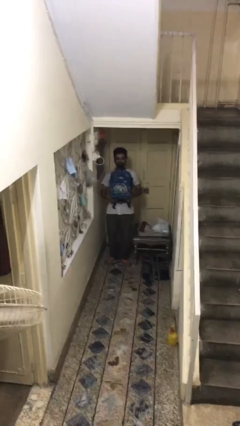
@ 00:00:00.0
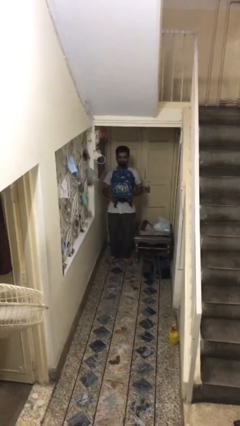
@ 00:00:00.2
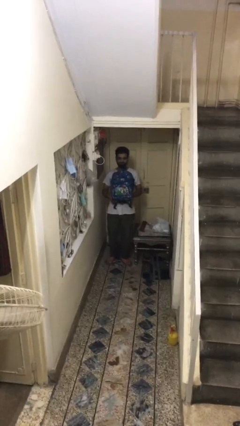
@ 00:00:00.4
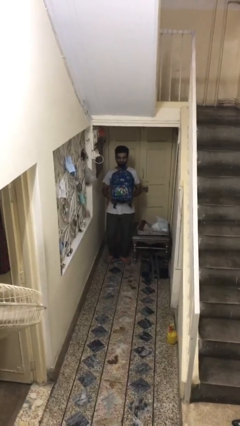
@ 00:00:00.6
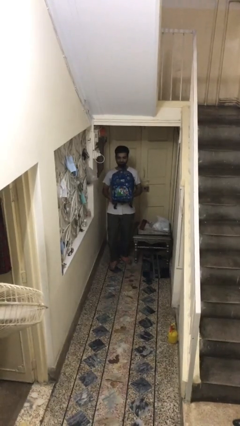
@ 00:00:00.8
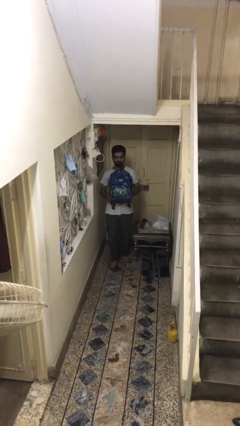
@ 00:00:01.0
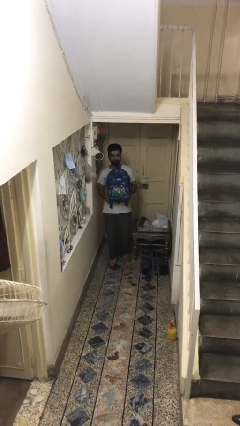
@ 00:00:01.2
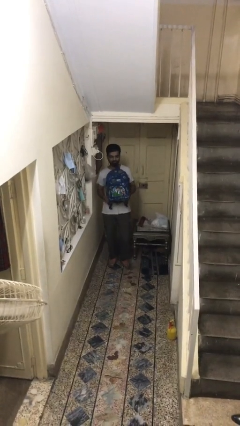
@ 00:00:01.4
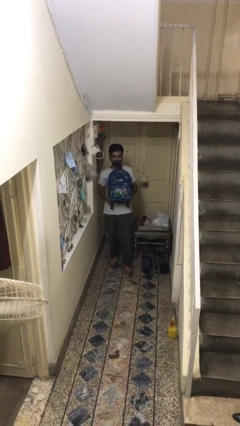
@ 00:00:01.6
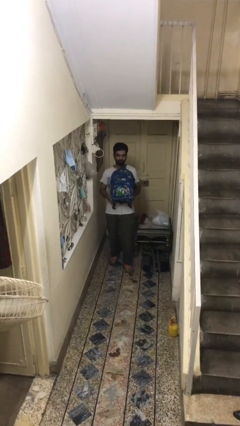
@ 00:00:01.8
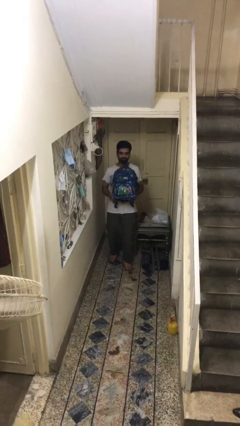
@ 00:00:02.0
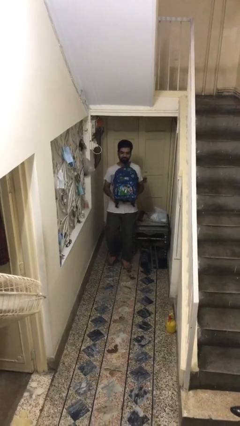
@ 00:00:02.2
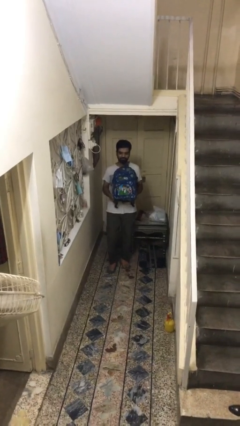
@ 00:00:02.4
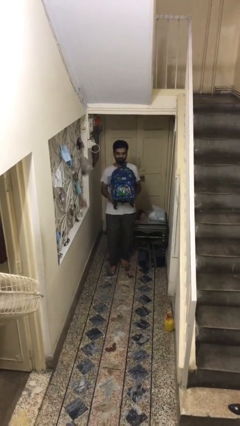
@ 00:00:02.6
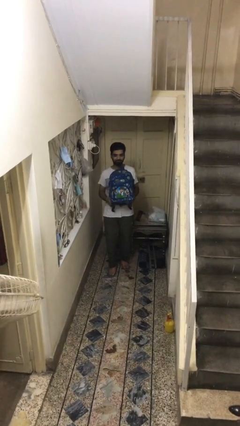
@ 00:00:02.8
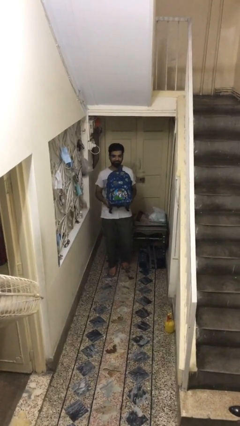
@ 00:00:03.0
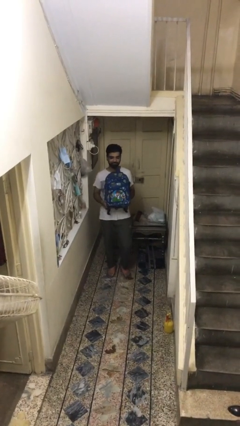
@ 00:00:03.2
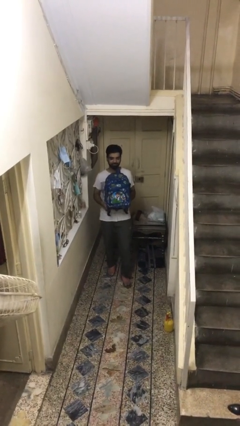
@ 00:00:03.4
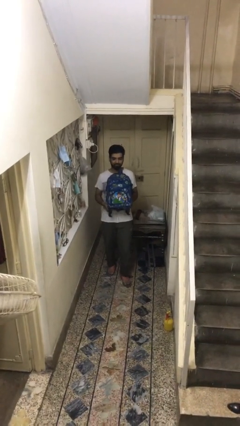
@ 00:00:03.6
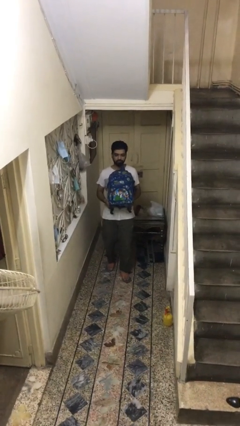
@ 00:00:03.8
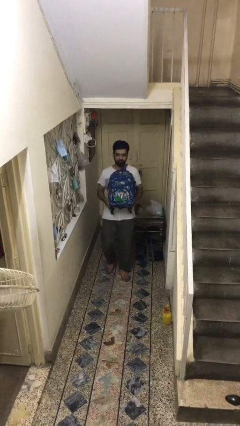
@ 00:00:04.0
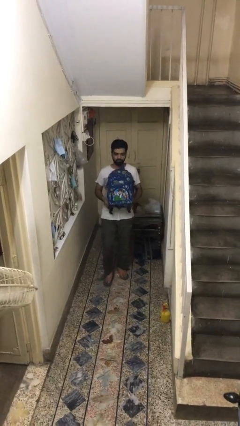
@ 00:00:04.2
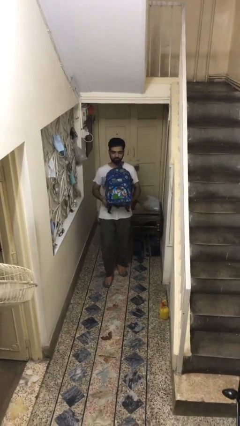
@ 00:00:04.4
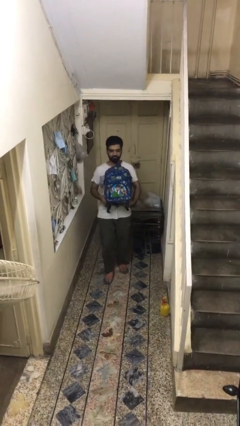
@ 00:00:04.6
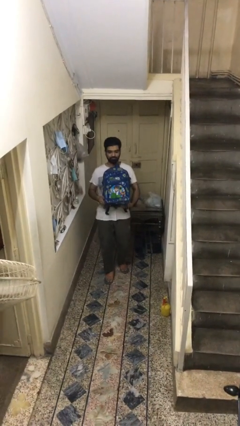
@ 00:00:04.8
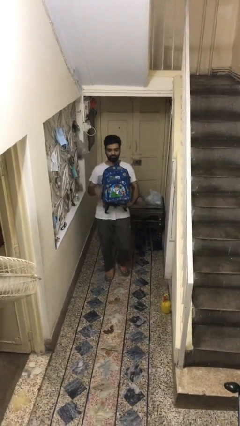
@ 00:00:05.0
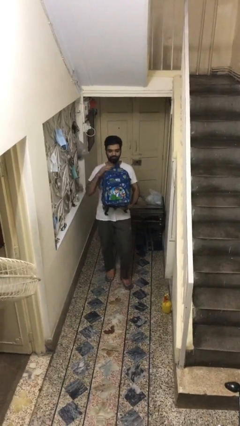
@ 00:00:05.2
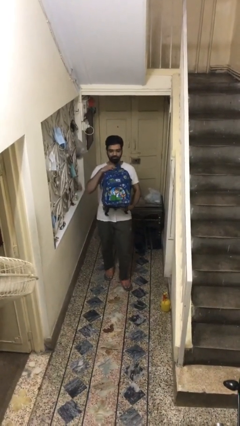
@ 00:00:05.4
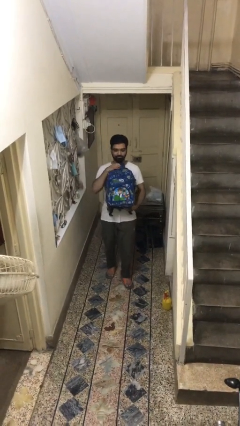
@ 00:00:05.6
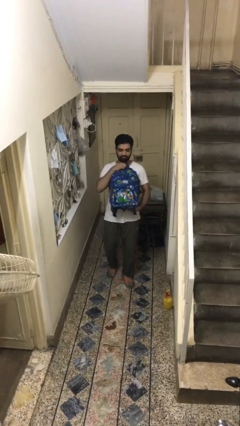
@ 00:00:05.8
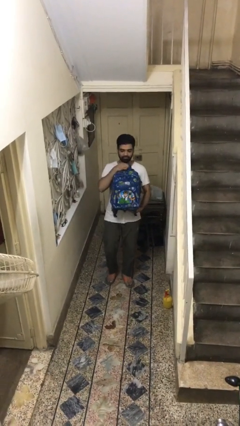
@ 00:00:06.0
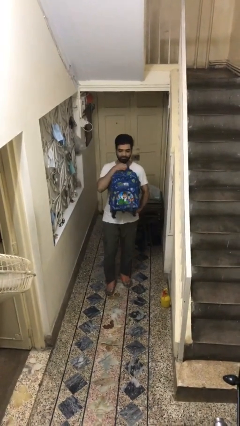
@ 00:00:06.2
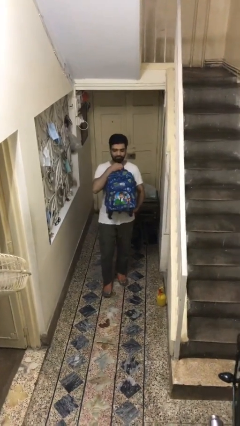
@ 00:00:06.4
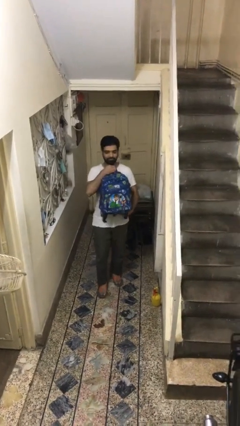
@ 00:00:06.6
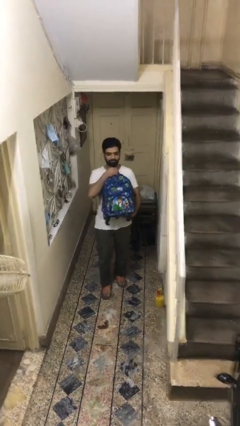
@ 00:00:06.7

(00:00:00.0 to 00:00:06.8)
person carries heavy object

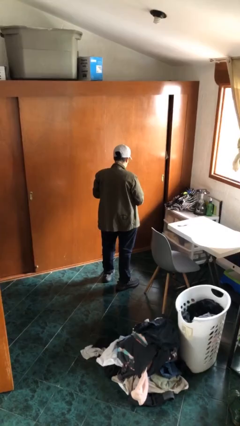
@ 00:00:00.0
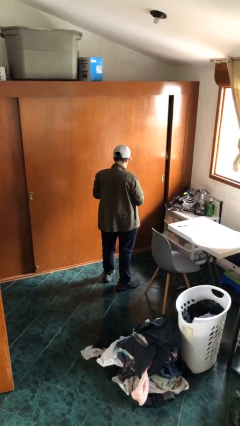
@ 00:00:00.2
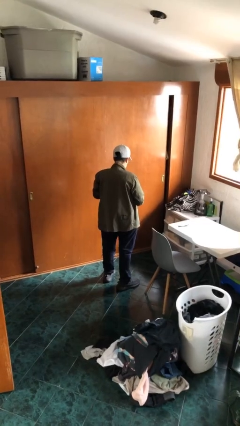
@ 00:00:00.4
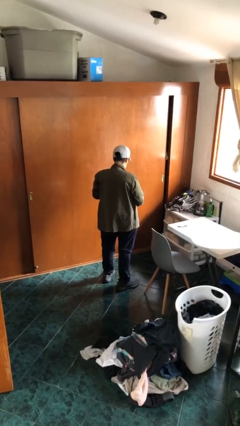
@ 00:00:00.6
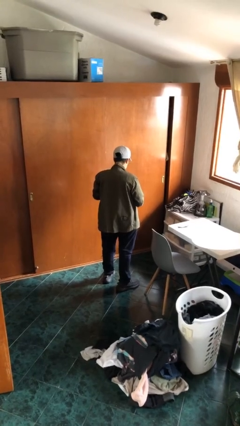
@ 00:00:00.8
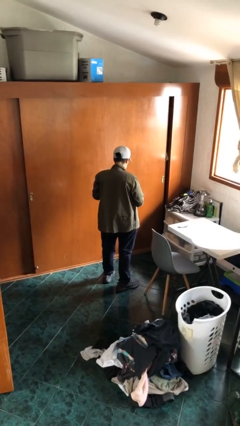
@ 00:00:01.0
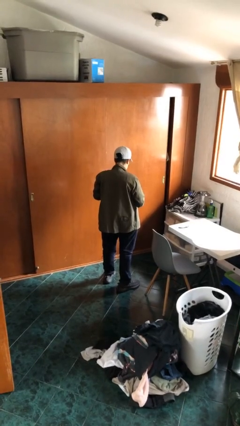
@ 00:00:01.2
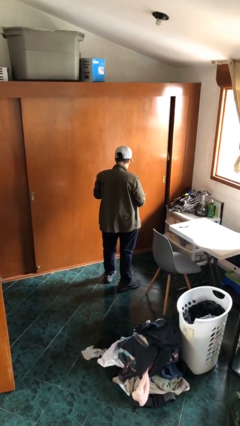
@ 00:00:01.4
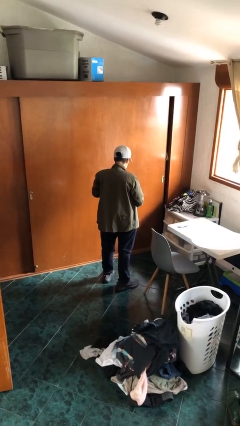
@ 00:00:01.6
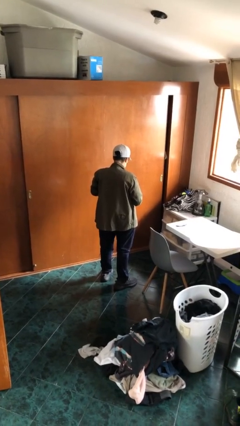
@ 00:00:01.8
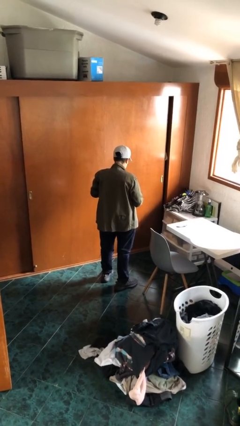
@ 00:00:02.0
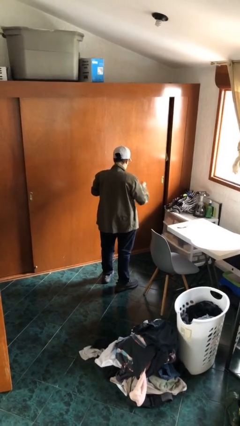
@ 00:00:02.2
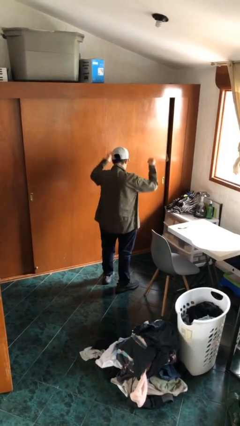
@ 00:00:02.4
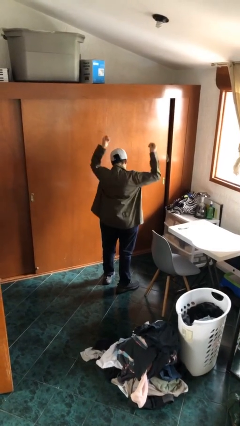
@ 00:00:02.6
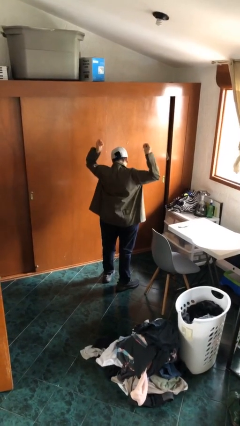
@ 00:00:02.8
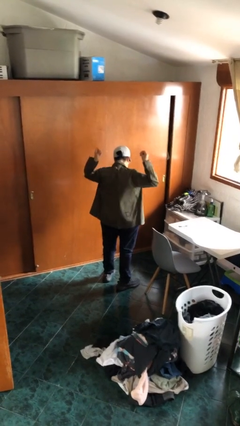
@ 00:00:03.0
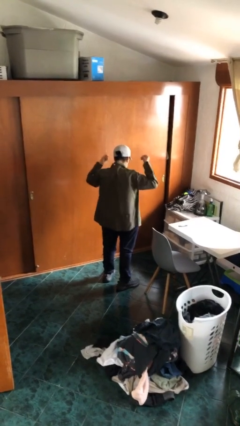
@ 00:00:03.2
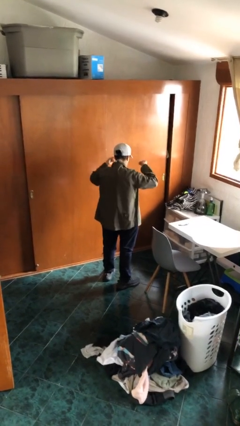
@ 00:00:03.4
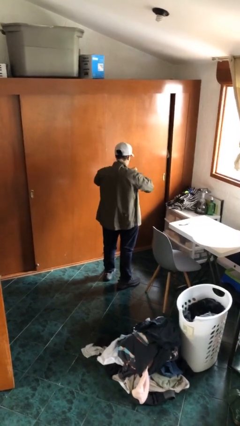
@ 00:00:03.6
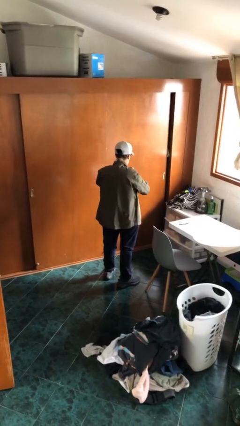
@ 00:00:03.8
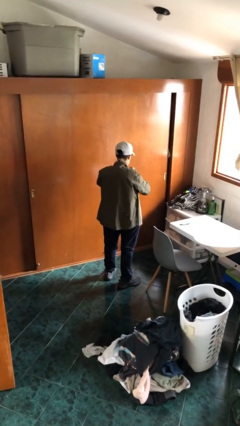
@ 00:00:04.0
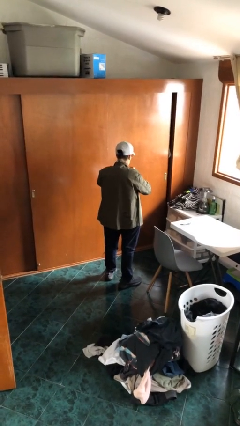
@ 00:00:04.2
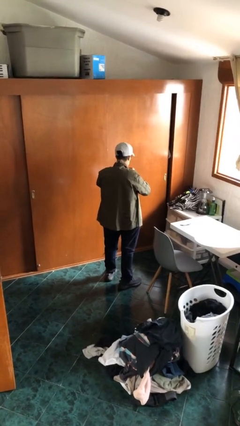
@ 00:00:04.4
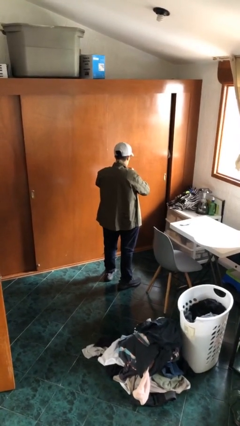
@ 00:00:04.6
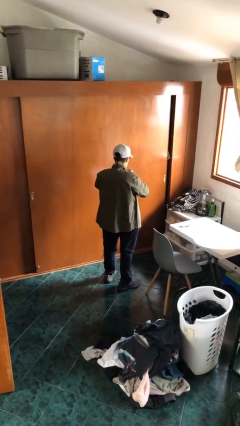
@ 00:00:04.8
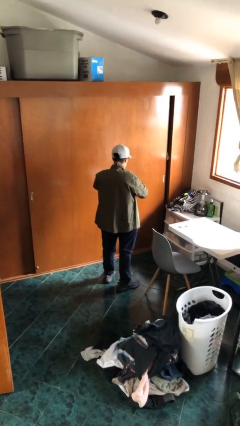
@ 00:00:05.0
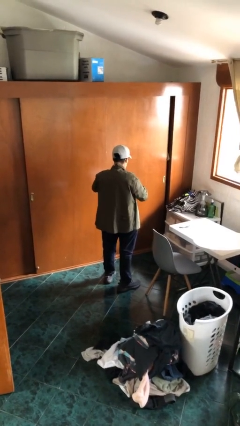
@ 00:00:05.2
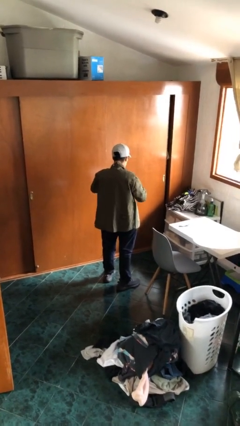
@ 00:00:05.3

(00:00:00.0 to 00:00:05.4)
person puts on necklace

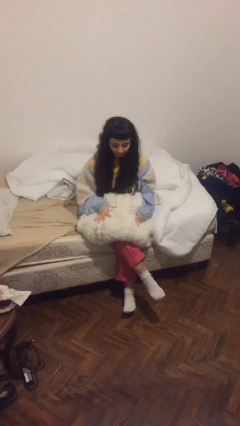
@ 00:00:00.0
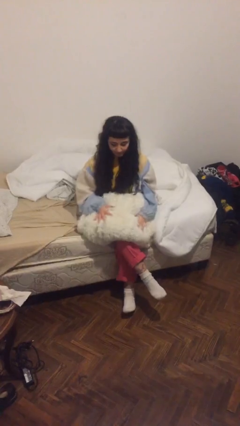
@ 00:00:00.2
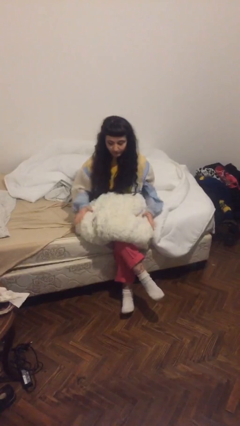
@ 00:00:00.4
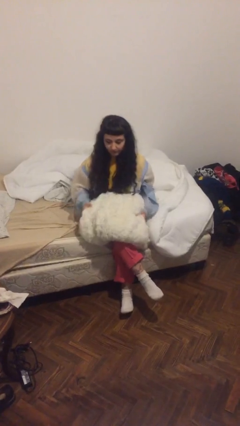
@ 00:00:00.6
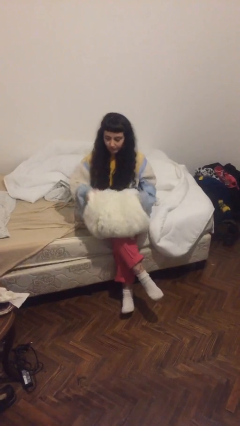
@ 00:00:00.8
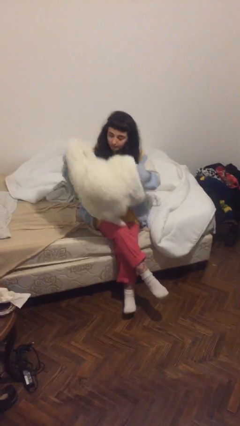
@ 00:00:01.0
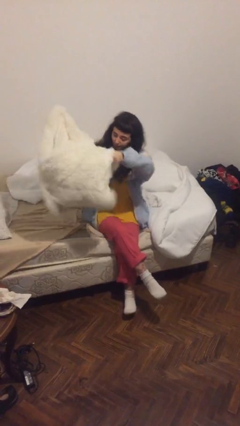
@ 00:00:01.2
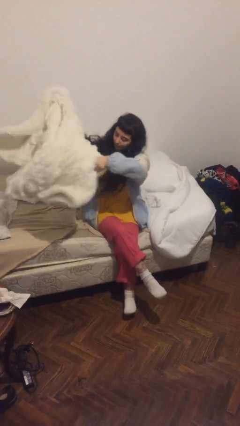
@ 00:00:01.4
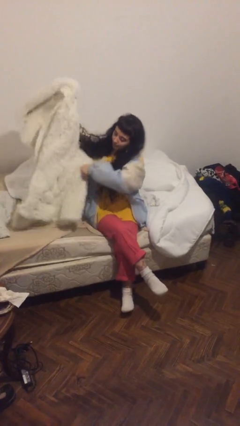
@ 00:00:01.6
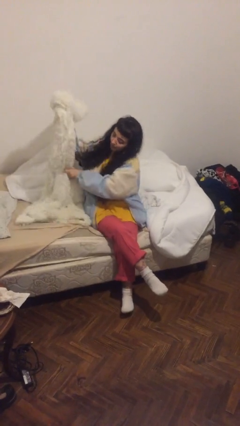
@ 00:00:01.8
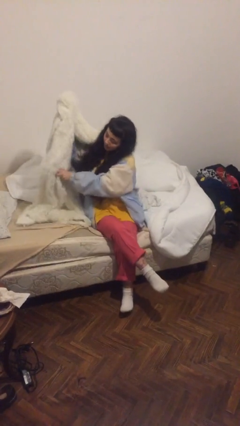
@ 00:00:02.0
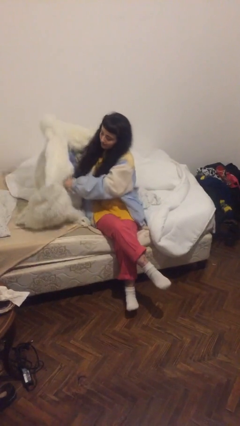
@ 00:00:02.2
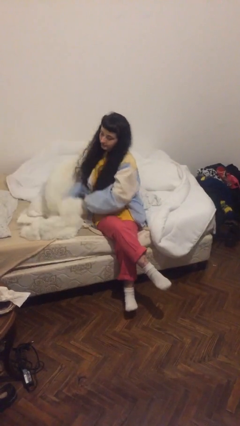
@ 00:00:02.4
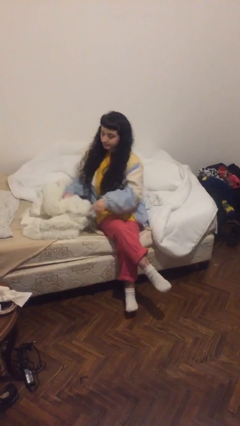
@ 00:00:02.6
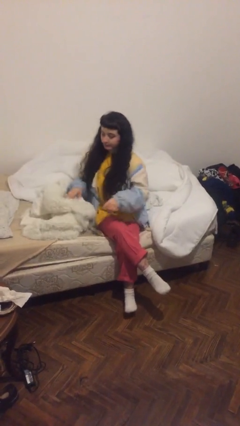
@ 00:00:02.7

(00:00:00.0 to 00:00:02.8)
person unfolds blanket

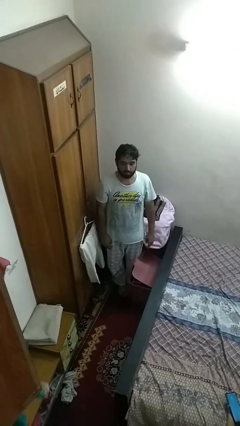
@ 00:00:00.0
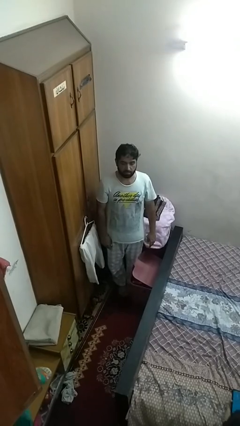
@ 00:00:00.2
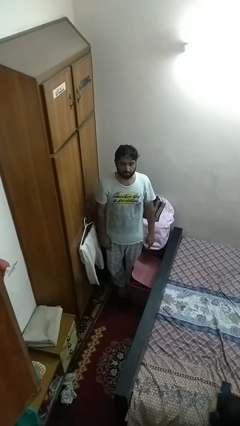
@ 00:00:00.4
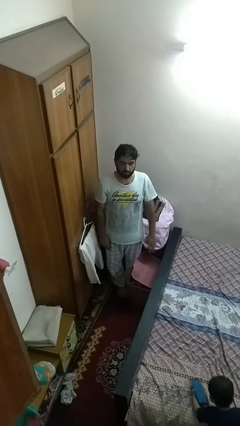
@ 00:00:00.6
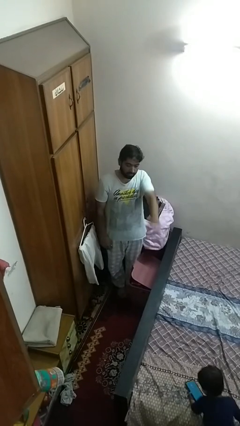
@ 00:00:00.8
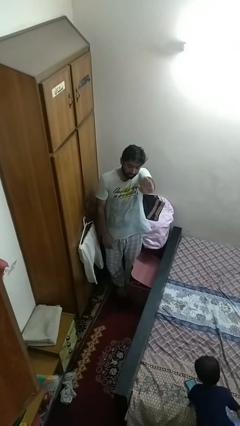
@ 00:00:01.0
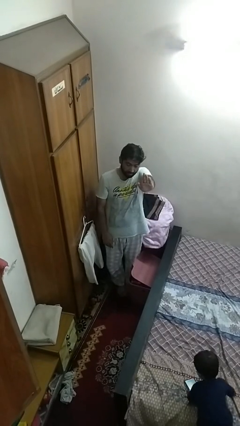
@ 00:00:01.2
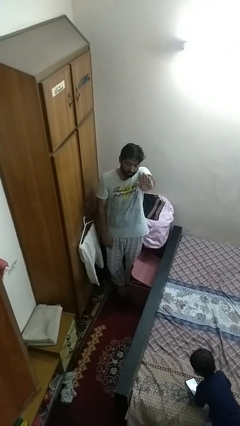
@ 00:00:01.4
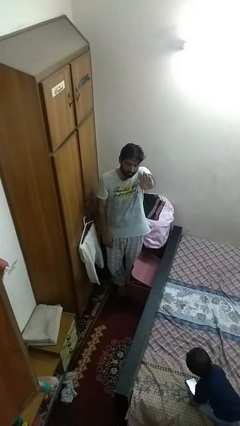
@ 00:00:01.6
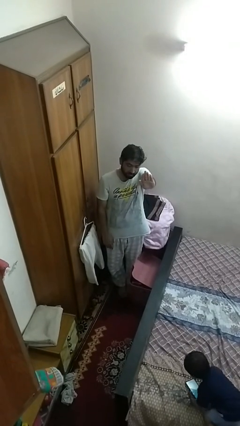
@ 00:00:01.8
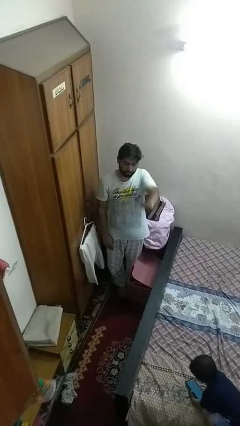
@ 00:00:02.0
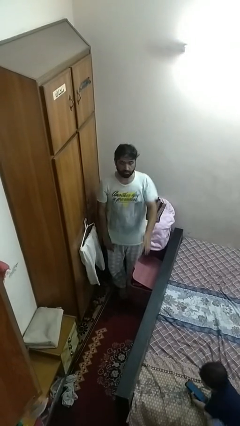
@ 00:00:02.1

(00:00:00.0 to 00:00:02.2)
person gestures stop

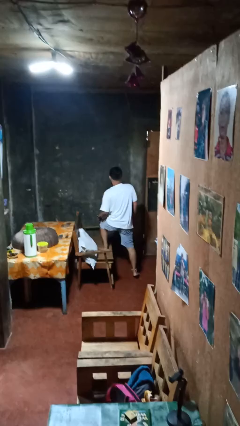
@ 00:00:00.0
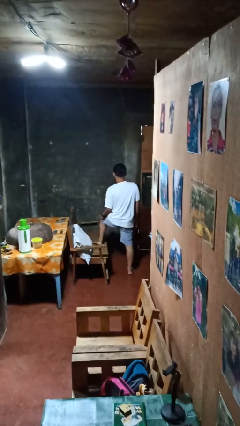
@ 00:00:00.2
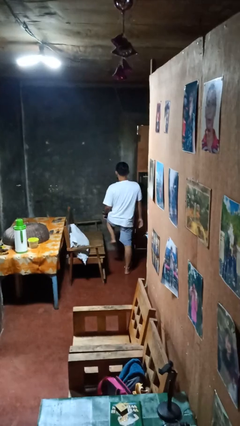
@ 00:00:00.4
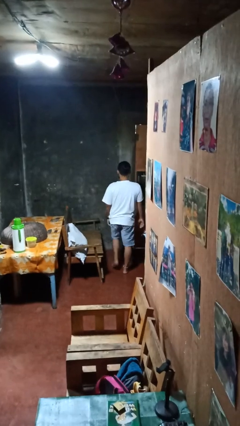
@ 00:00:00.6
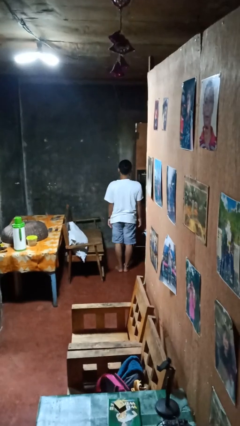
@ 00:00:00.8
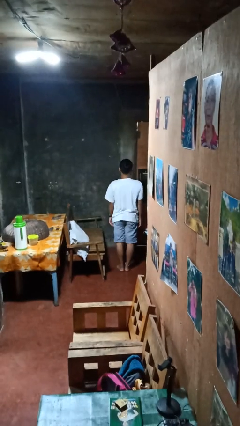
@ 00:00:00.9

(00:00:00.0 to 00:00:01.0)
person climbs off couch
